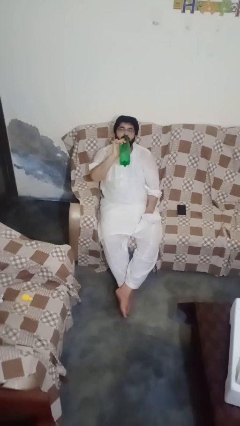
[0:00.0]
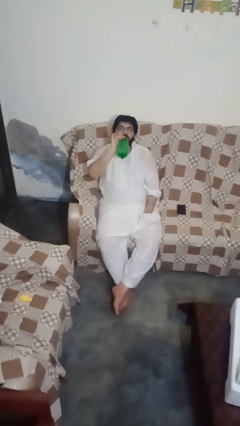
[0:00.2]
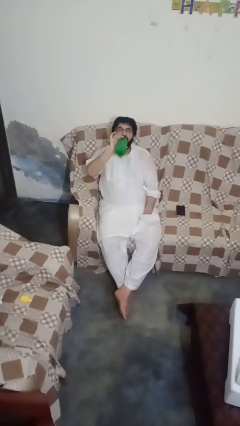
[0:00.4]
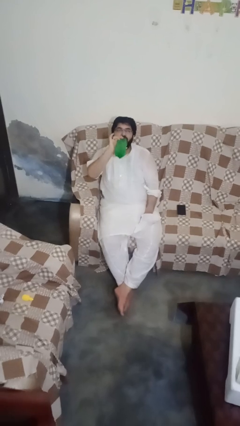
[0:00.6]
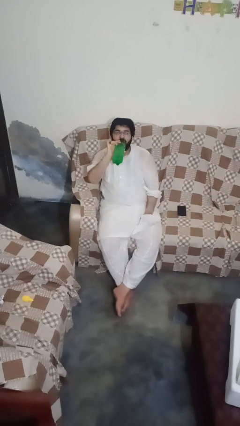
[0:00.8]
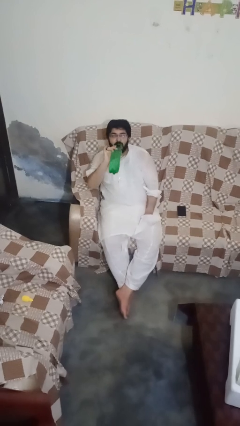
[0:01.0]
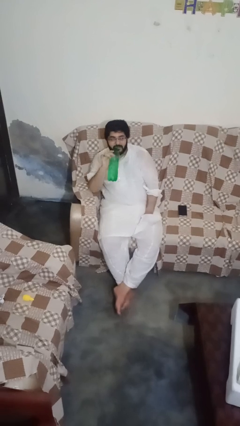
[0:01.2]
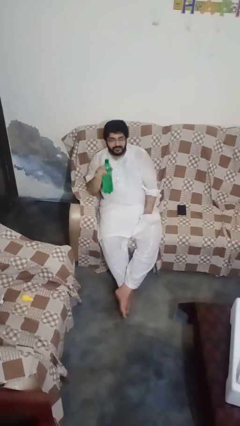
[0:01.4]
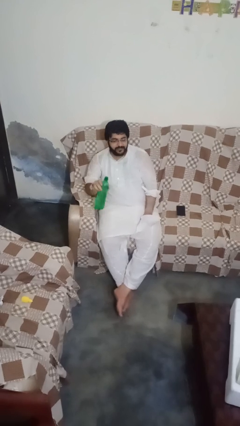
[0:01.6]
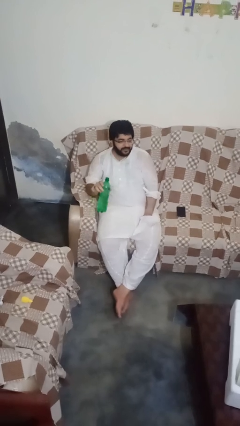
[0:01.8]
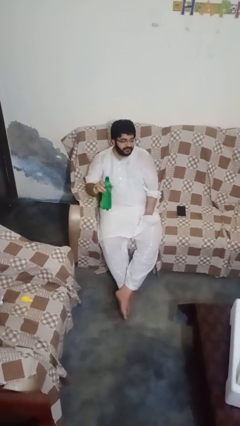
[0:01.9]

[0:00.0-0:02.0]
person drinks from bottle

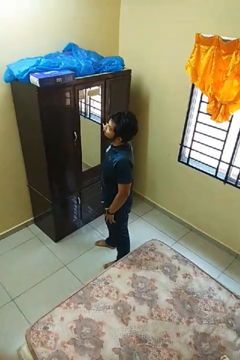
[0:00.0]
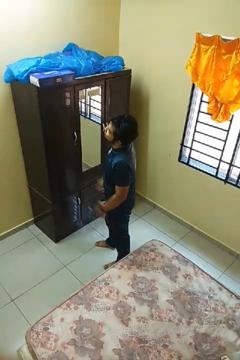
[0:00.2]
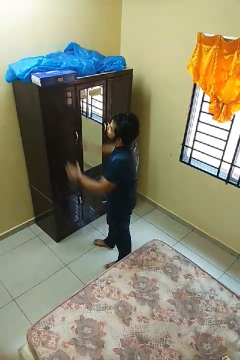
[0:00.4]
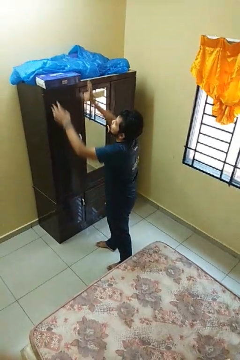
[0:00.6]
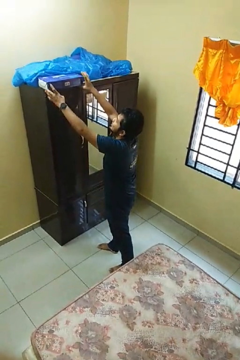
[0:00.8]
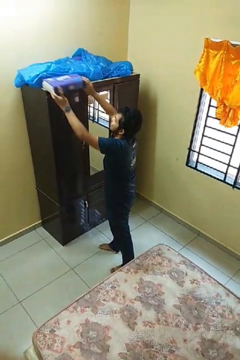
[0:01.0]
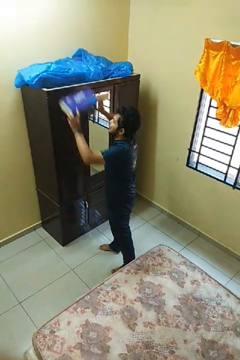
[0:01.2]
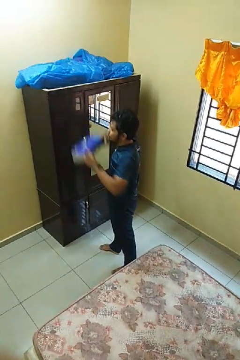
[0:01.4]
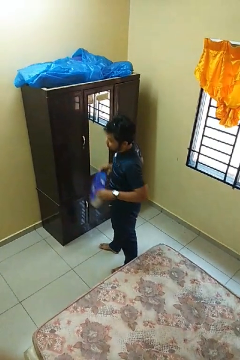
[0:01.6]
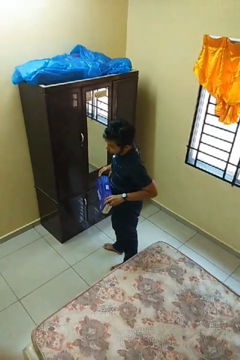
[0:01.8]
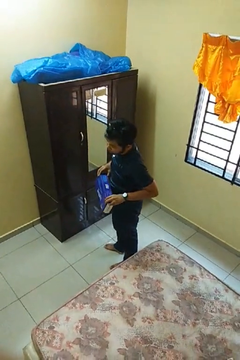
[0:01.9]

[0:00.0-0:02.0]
person picks up object from countertop

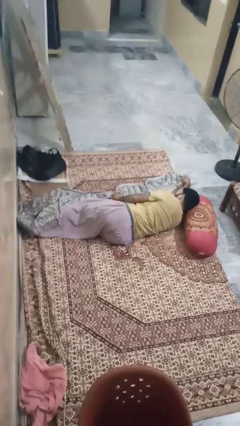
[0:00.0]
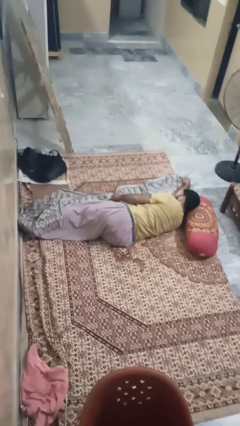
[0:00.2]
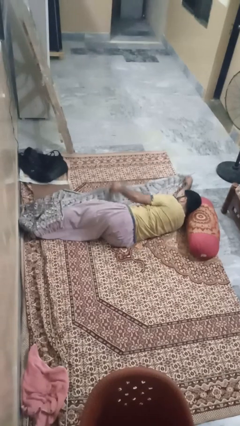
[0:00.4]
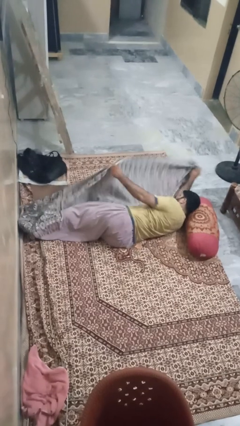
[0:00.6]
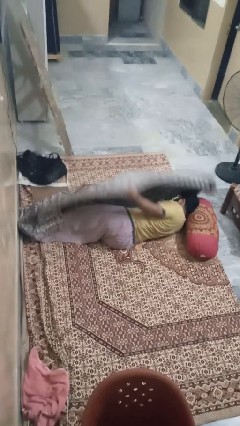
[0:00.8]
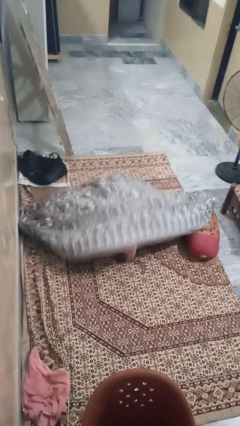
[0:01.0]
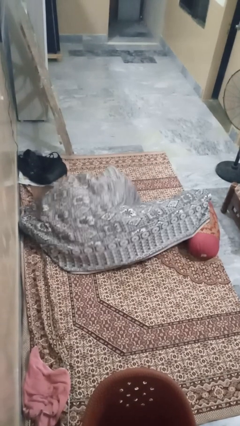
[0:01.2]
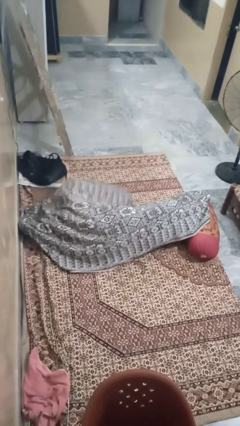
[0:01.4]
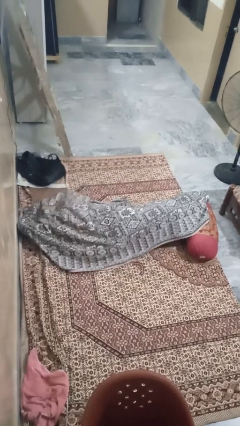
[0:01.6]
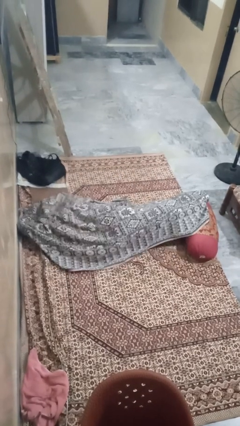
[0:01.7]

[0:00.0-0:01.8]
person covers with blanket

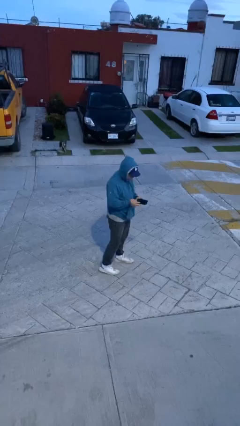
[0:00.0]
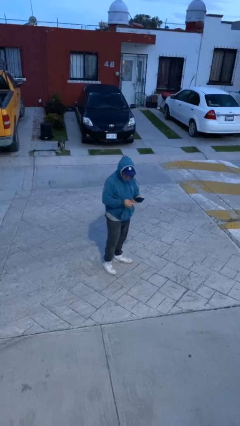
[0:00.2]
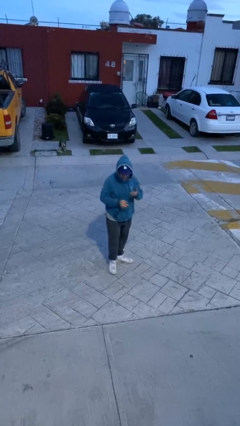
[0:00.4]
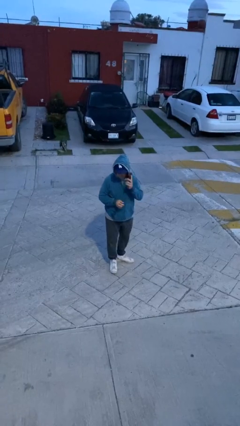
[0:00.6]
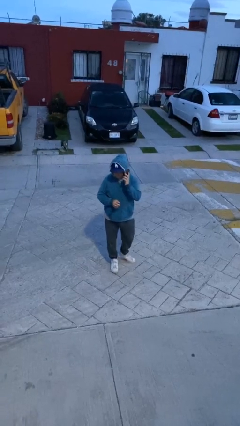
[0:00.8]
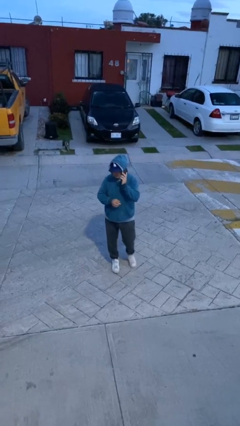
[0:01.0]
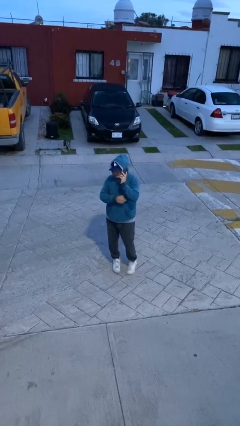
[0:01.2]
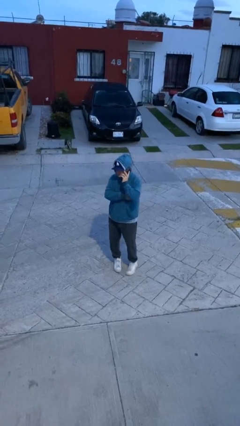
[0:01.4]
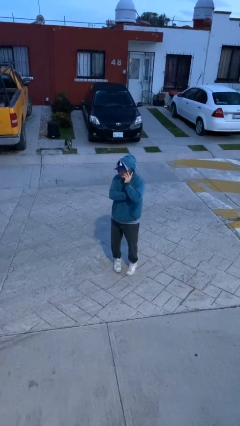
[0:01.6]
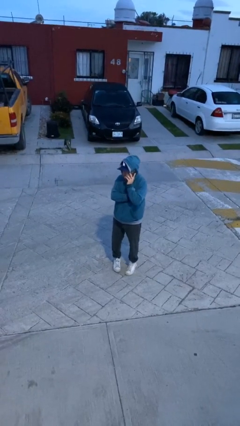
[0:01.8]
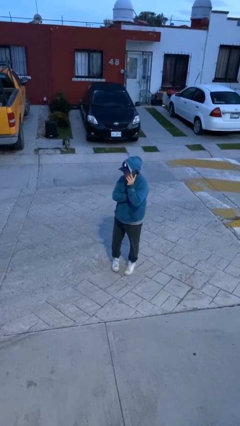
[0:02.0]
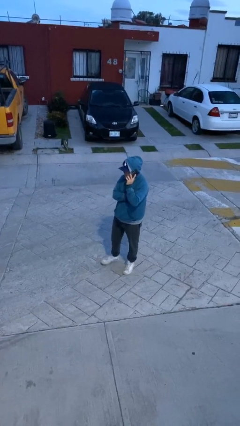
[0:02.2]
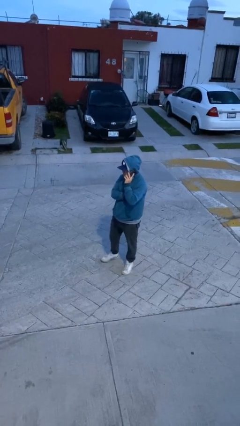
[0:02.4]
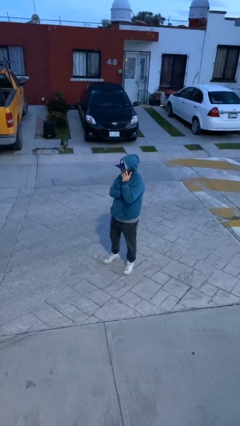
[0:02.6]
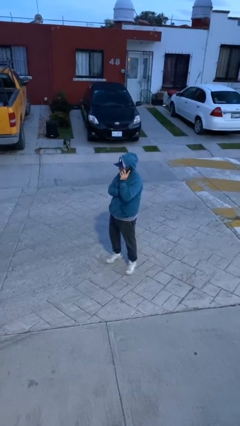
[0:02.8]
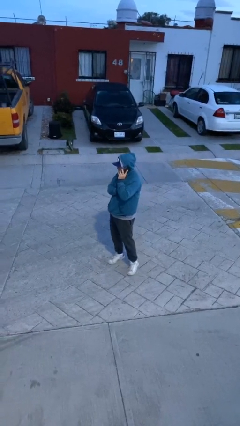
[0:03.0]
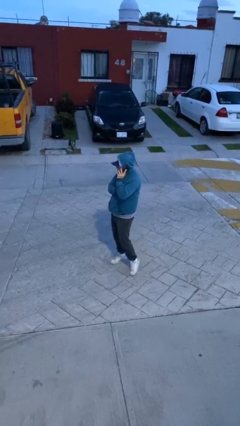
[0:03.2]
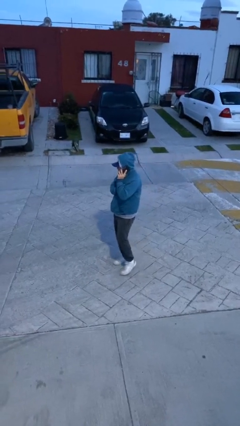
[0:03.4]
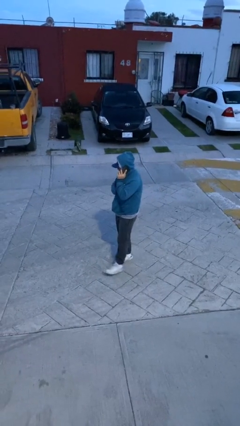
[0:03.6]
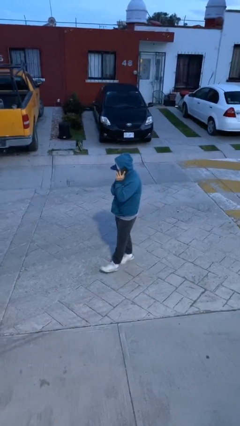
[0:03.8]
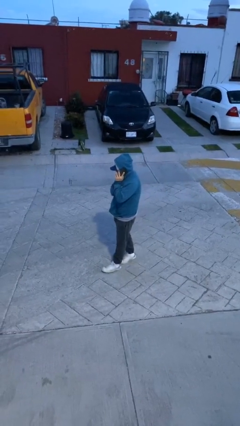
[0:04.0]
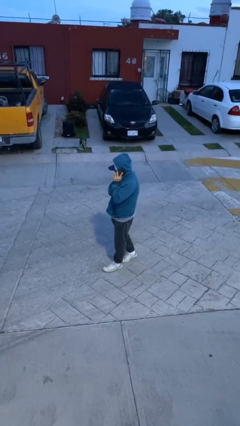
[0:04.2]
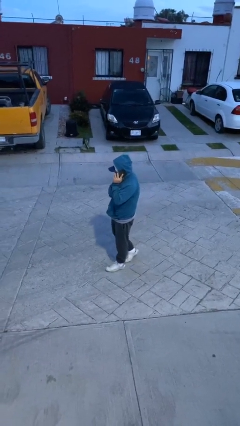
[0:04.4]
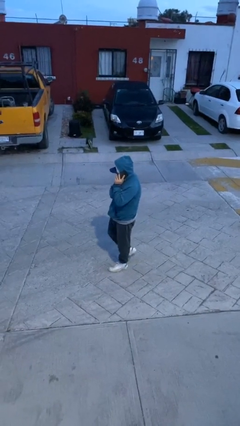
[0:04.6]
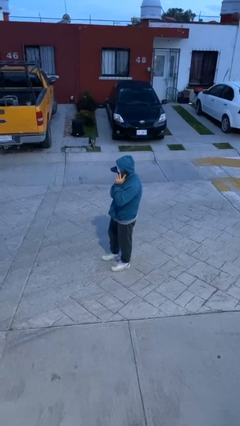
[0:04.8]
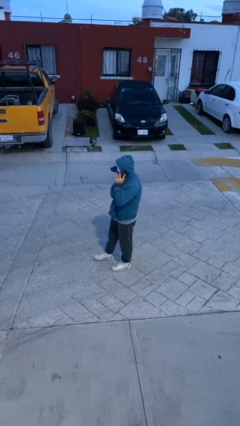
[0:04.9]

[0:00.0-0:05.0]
person talks on phone

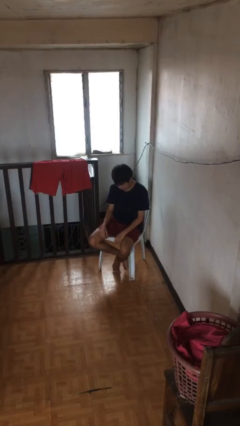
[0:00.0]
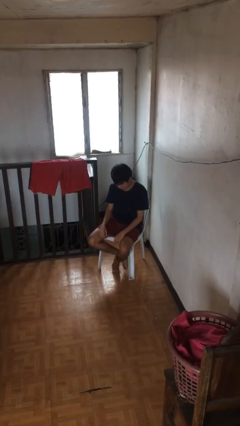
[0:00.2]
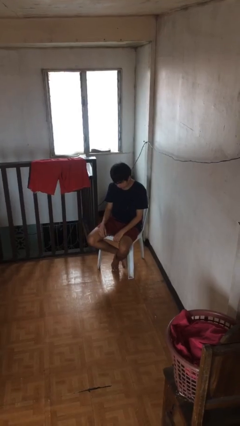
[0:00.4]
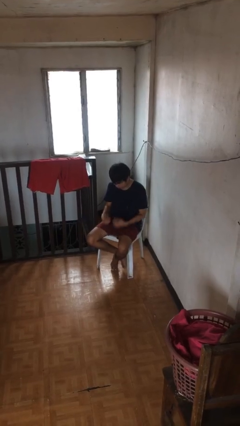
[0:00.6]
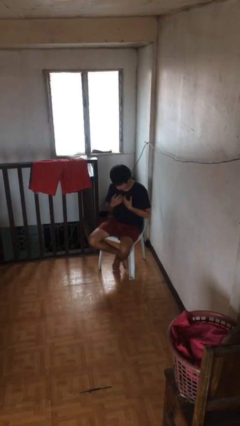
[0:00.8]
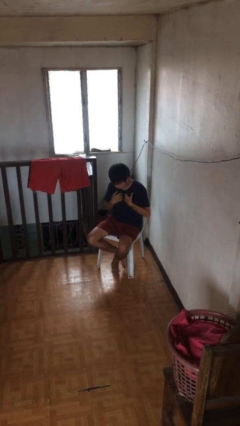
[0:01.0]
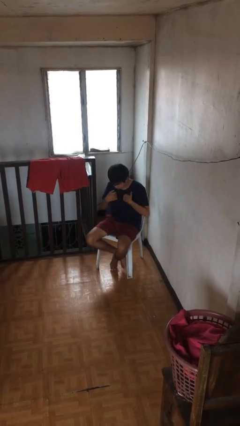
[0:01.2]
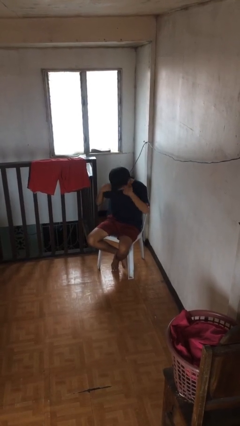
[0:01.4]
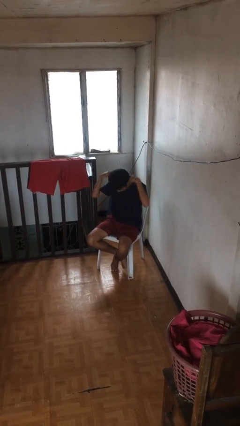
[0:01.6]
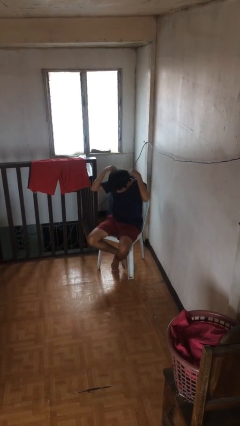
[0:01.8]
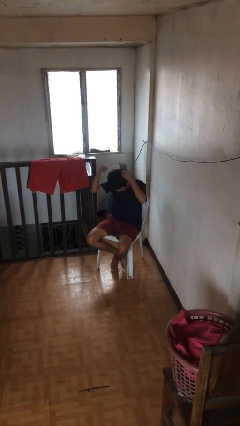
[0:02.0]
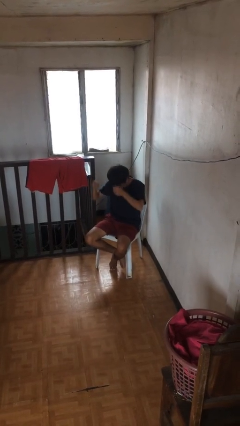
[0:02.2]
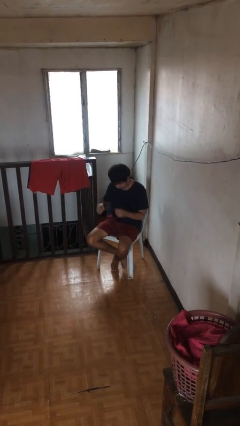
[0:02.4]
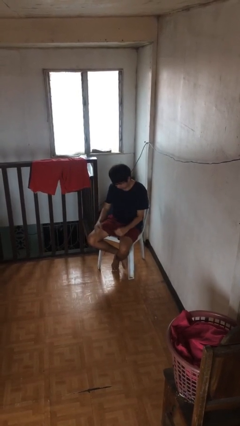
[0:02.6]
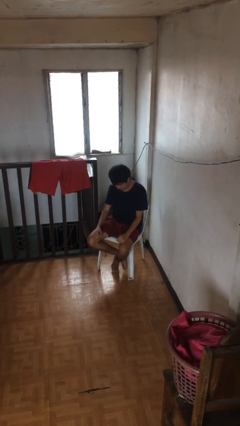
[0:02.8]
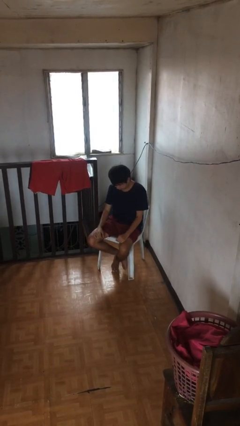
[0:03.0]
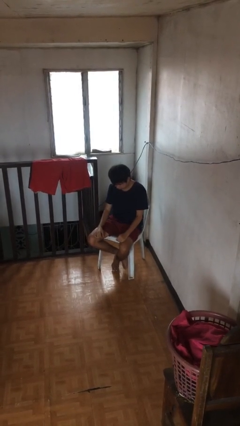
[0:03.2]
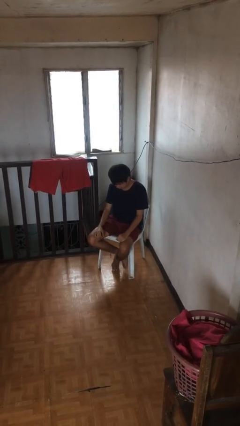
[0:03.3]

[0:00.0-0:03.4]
person takes off necklace

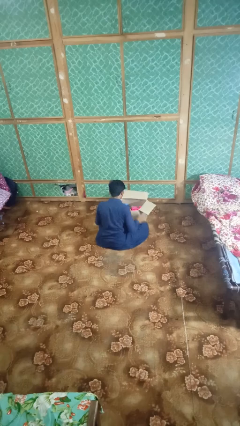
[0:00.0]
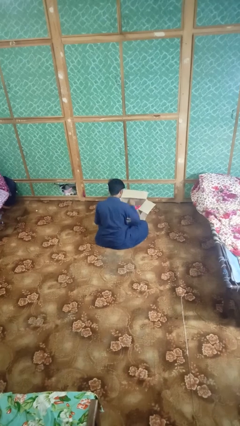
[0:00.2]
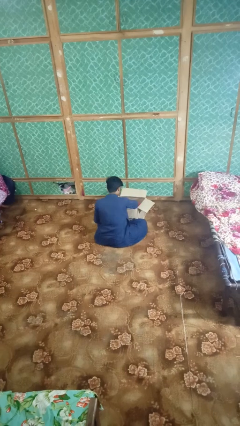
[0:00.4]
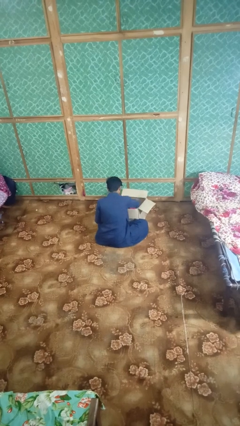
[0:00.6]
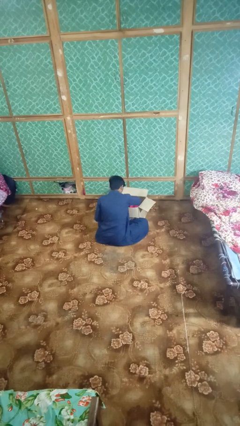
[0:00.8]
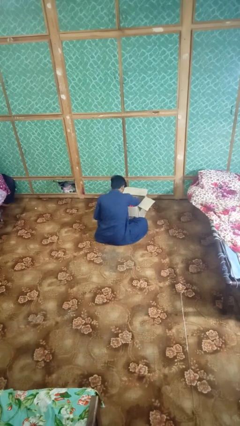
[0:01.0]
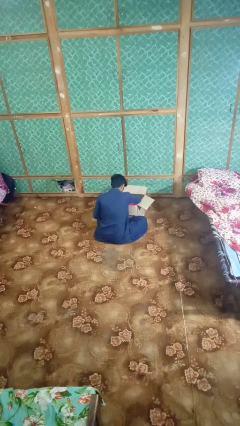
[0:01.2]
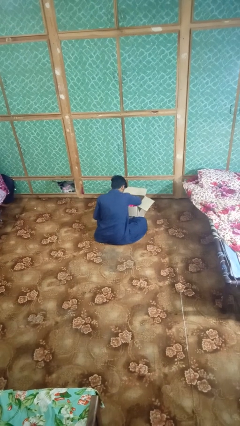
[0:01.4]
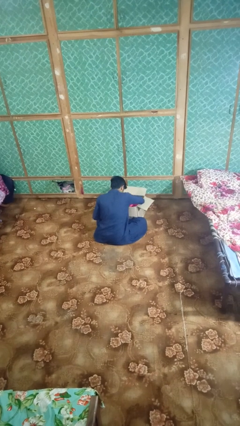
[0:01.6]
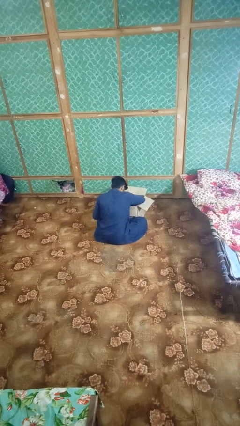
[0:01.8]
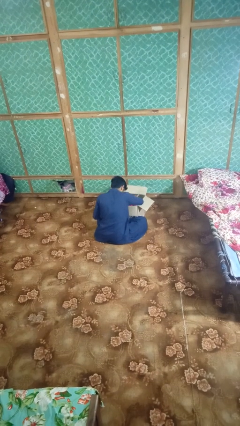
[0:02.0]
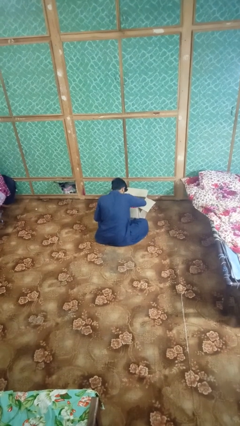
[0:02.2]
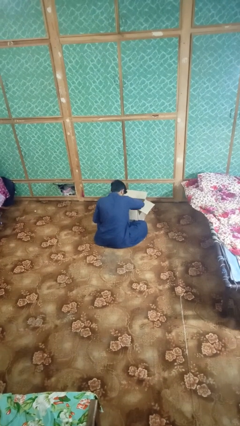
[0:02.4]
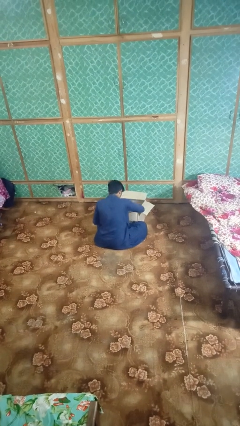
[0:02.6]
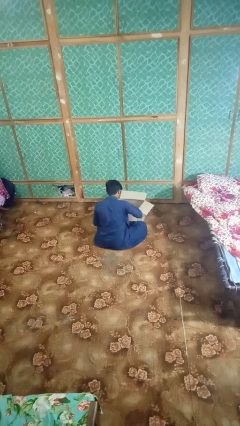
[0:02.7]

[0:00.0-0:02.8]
person searches in box

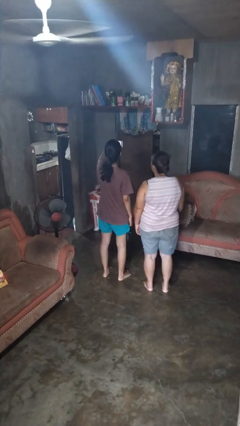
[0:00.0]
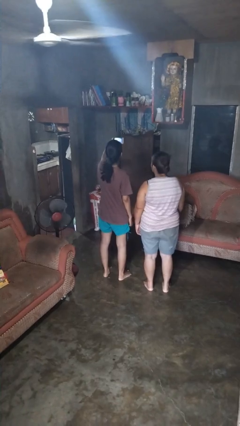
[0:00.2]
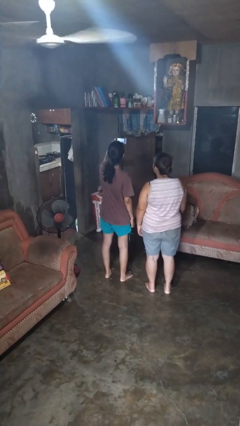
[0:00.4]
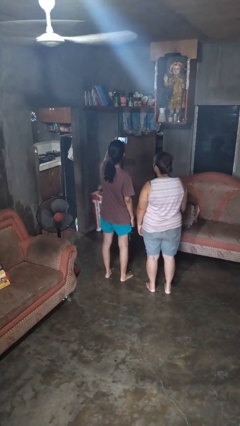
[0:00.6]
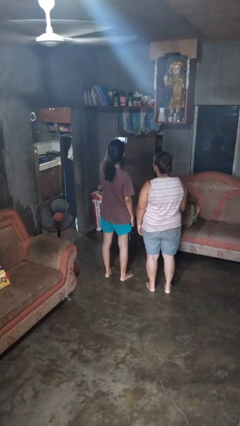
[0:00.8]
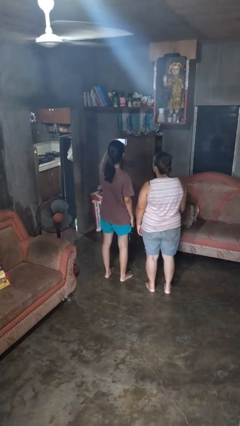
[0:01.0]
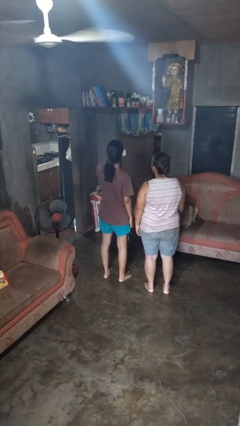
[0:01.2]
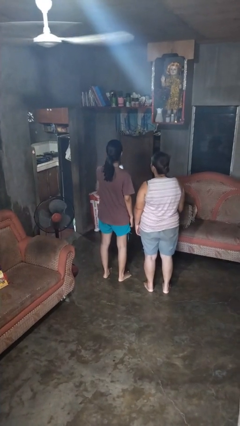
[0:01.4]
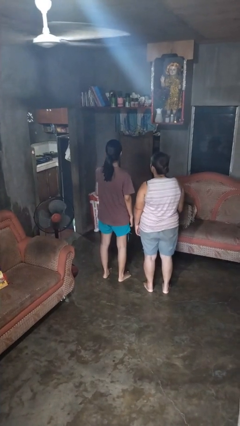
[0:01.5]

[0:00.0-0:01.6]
person takes selfie with person
